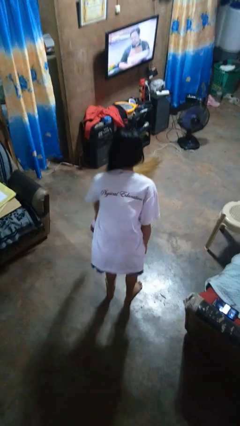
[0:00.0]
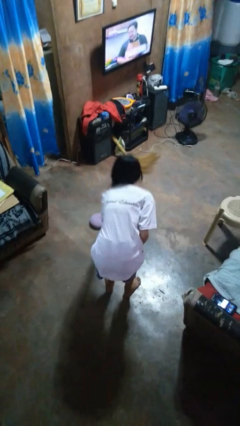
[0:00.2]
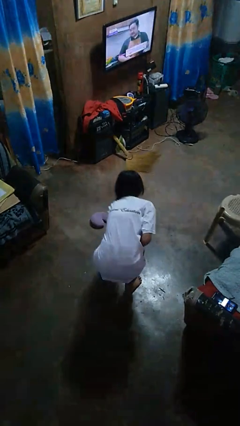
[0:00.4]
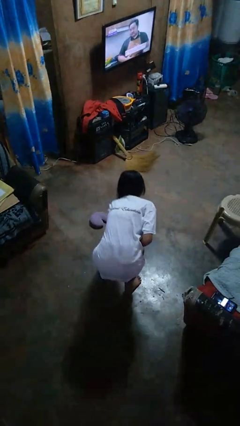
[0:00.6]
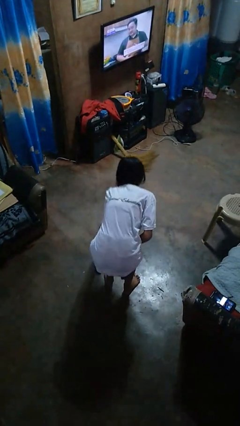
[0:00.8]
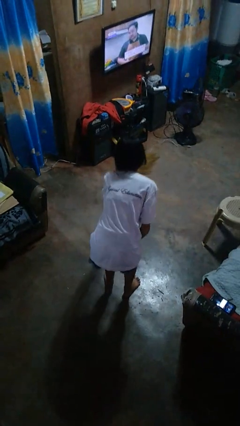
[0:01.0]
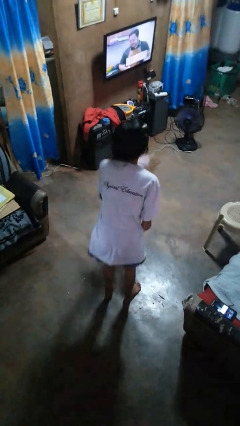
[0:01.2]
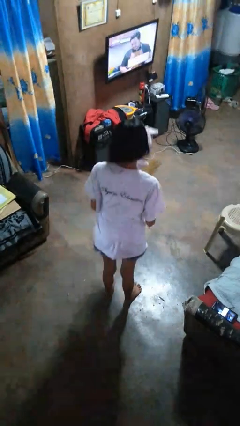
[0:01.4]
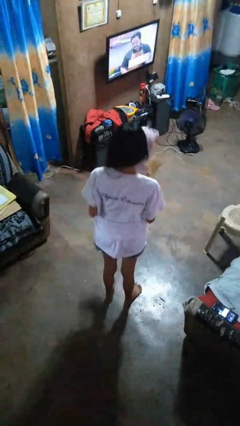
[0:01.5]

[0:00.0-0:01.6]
person picks up object from floor

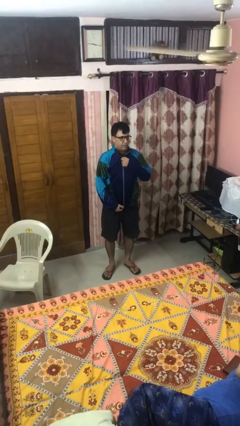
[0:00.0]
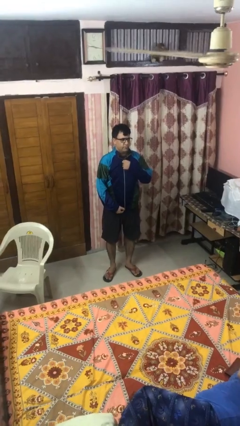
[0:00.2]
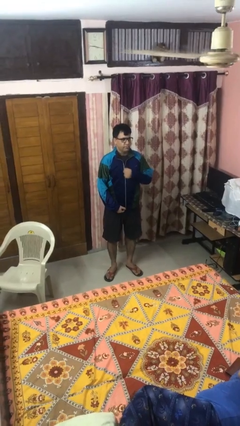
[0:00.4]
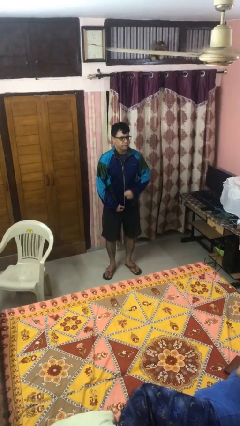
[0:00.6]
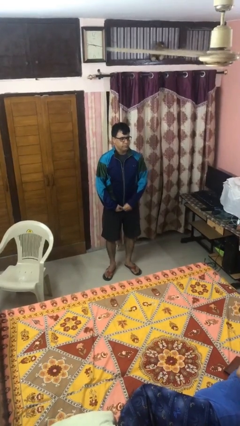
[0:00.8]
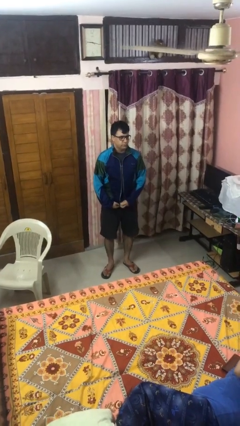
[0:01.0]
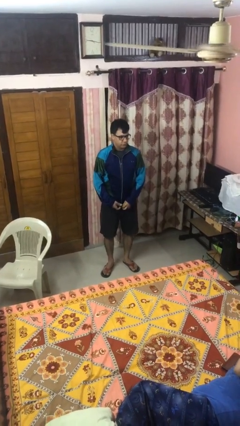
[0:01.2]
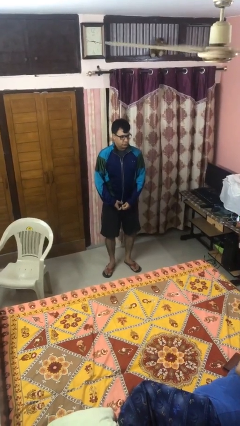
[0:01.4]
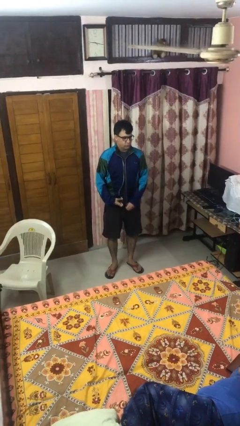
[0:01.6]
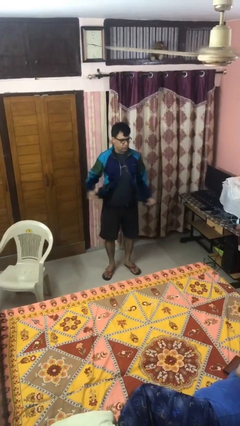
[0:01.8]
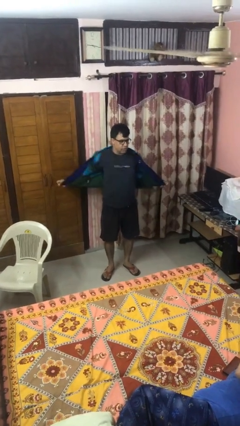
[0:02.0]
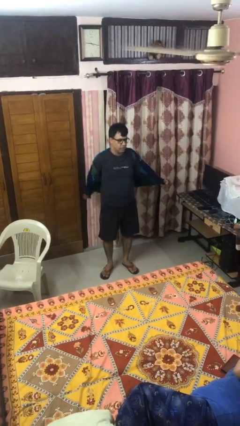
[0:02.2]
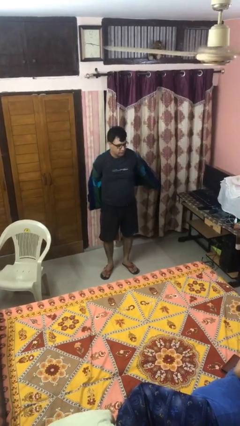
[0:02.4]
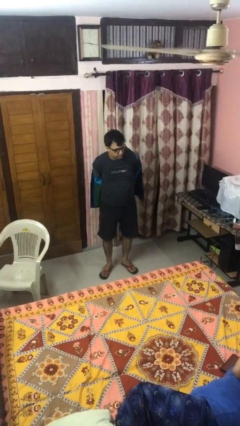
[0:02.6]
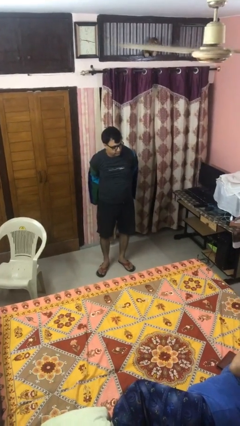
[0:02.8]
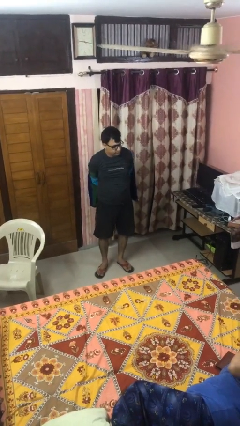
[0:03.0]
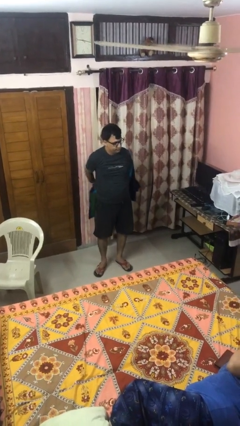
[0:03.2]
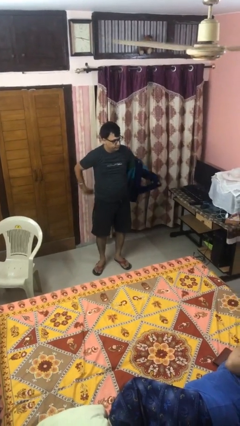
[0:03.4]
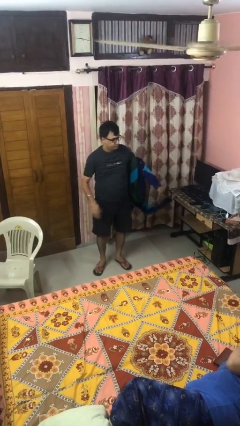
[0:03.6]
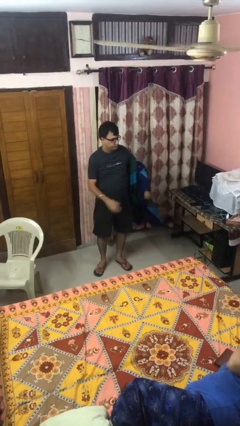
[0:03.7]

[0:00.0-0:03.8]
person unzips jacket

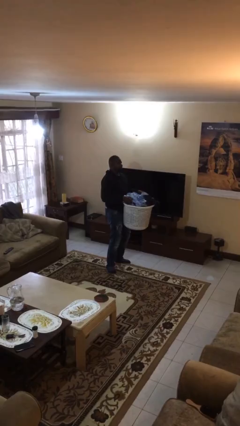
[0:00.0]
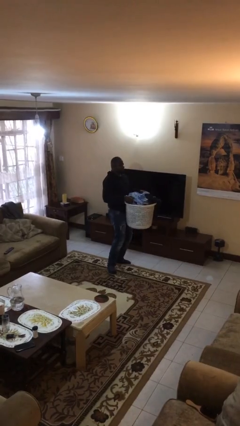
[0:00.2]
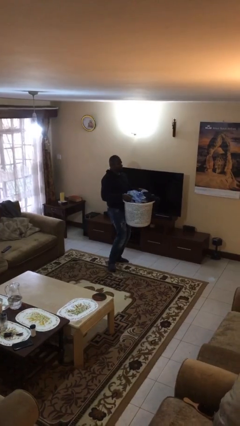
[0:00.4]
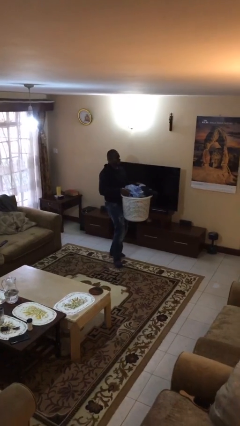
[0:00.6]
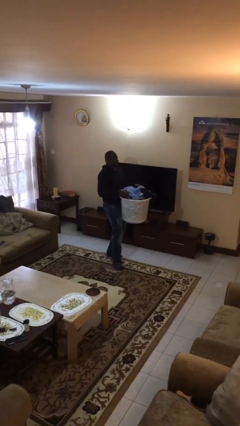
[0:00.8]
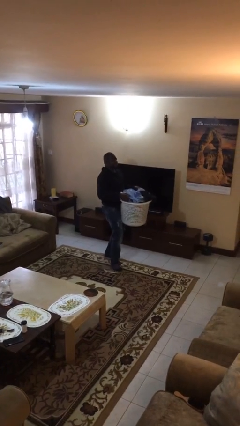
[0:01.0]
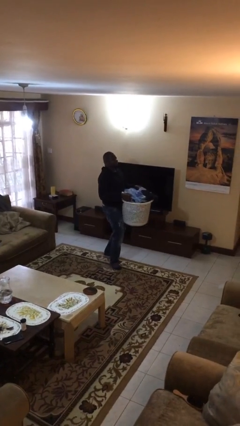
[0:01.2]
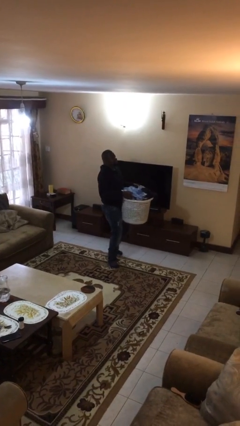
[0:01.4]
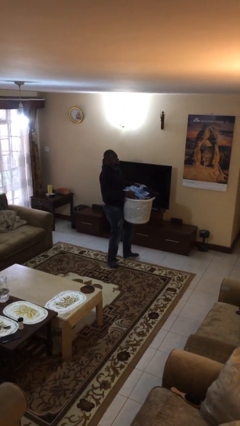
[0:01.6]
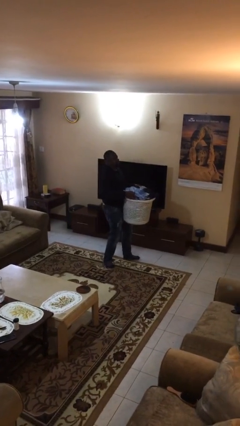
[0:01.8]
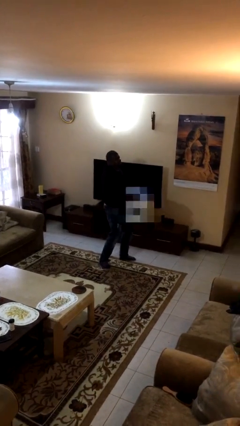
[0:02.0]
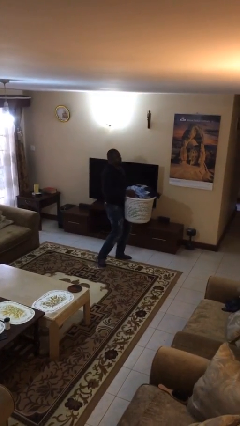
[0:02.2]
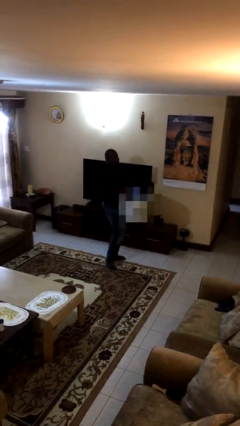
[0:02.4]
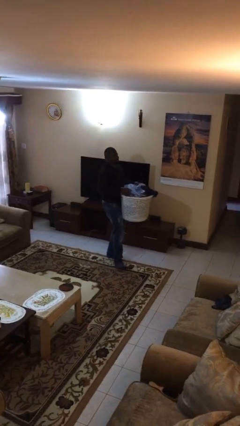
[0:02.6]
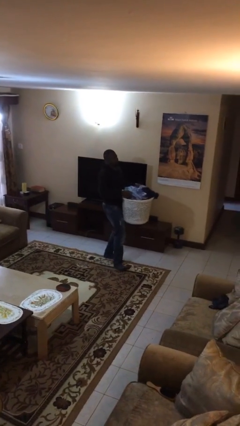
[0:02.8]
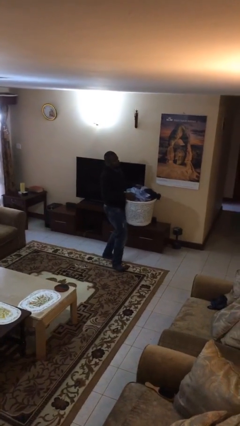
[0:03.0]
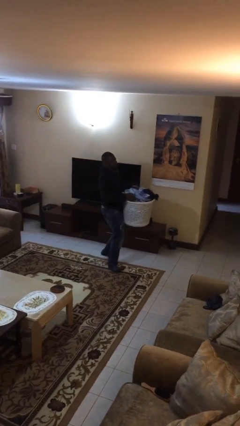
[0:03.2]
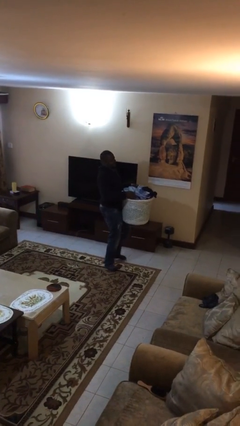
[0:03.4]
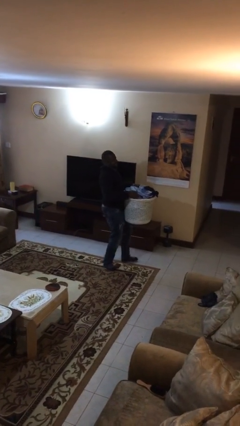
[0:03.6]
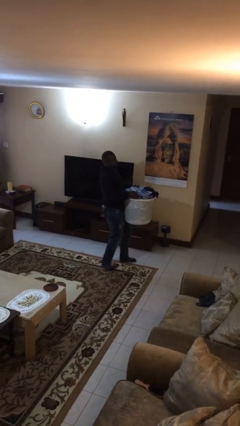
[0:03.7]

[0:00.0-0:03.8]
person carries heavy object

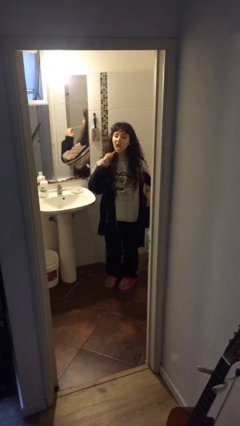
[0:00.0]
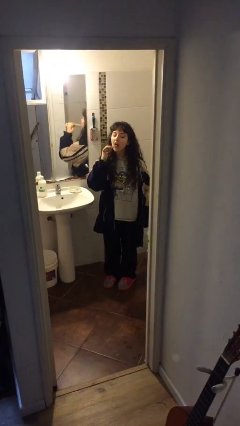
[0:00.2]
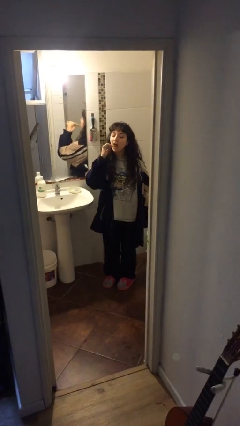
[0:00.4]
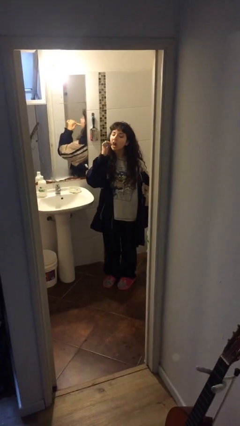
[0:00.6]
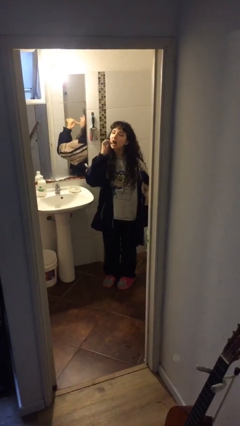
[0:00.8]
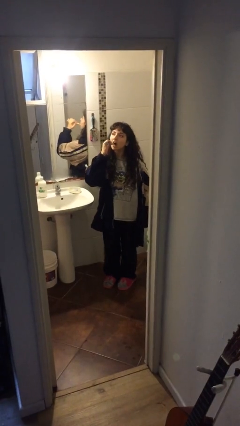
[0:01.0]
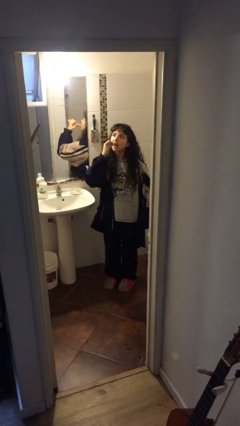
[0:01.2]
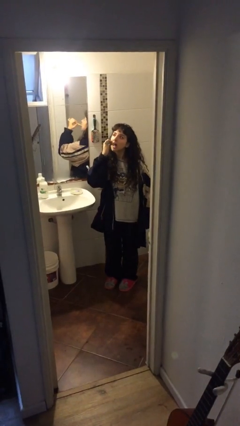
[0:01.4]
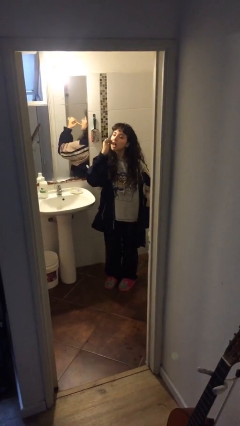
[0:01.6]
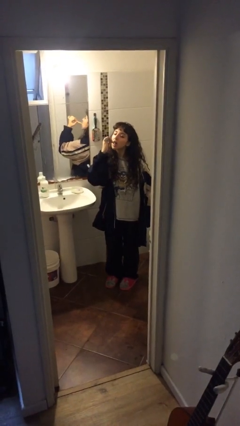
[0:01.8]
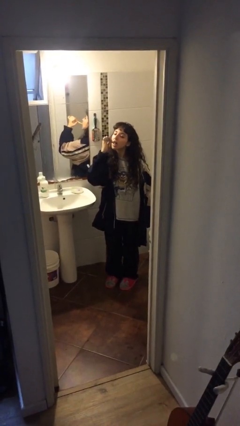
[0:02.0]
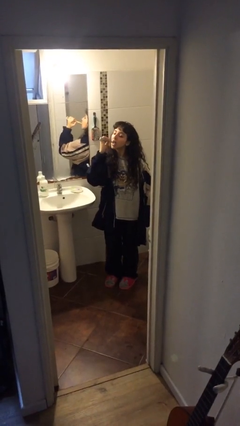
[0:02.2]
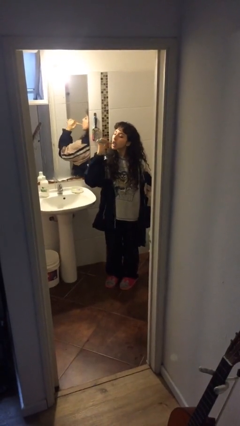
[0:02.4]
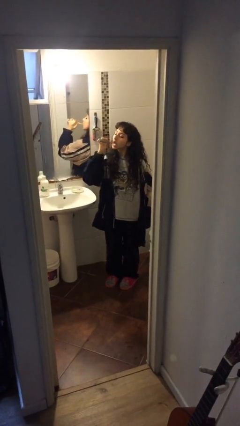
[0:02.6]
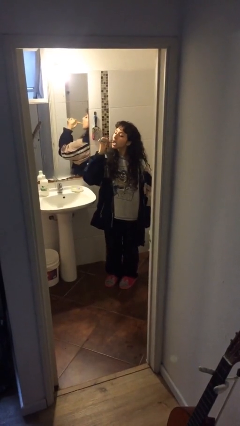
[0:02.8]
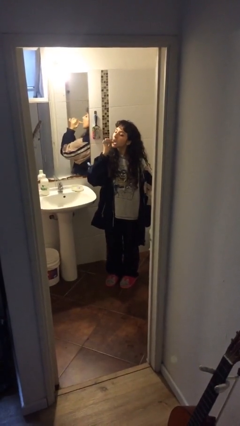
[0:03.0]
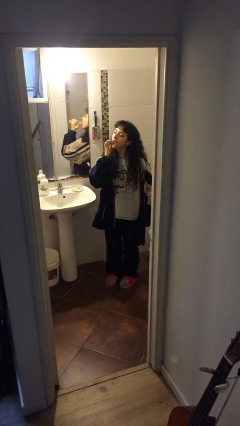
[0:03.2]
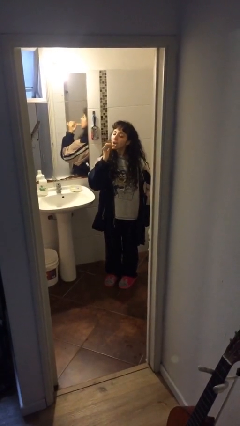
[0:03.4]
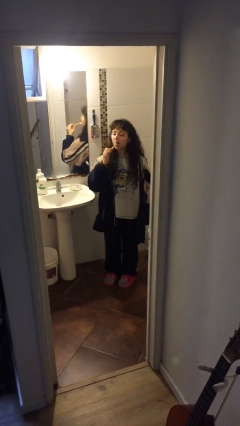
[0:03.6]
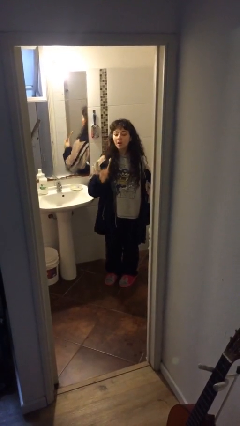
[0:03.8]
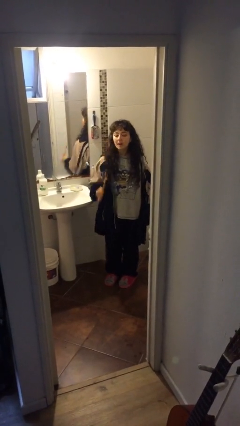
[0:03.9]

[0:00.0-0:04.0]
person brushes teeth

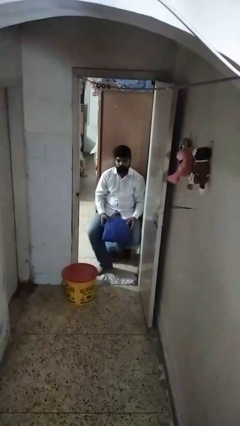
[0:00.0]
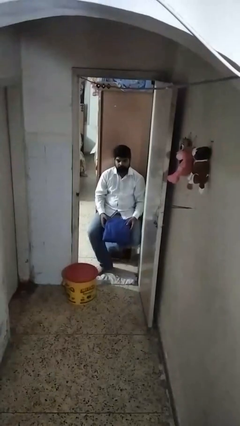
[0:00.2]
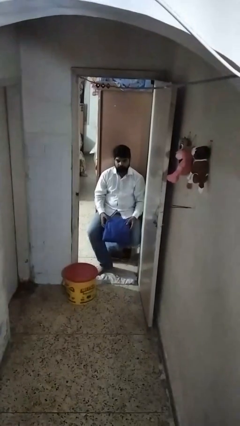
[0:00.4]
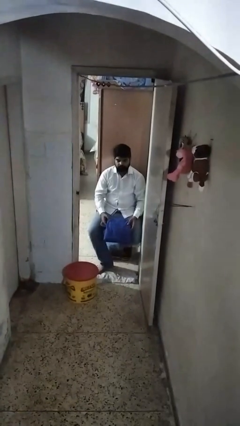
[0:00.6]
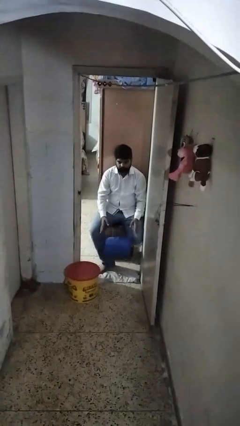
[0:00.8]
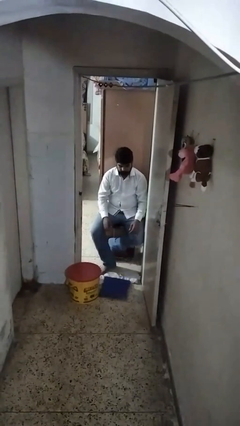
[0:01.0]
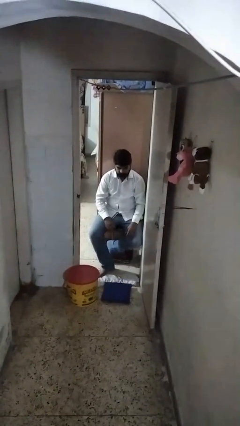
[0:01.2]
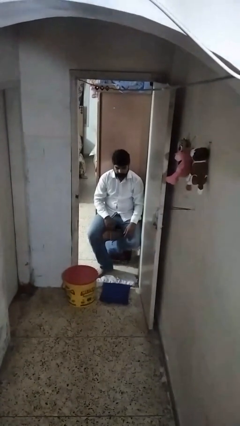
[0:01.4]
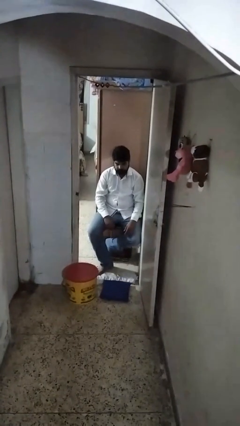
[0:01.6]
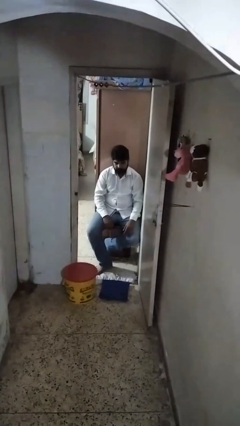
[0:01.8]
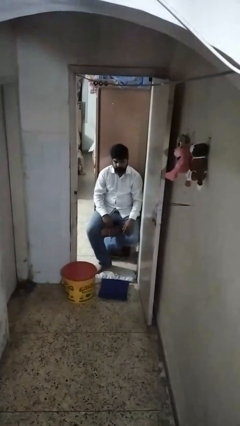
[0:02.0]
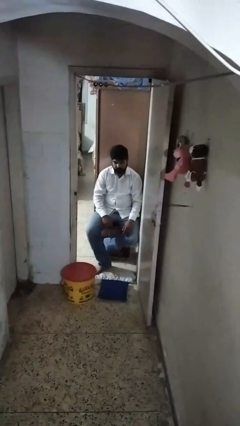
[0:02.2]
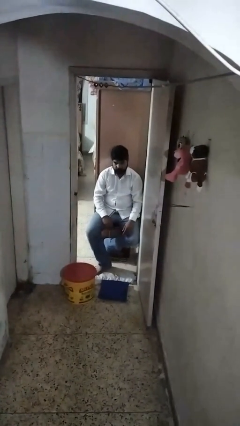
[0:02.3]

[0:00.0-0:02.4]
person drops object

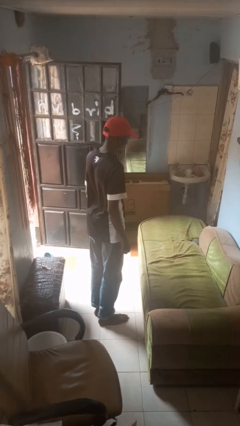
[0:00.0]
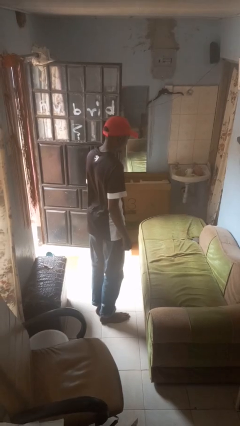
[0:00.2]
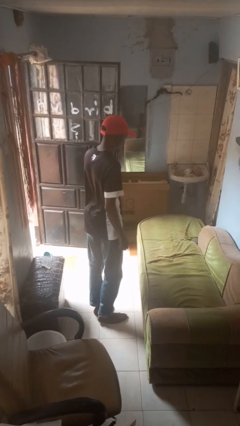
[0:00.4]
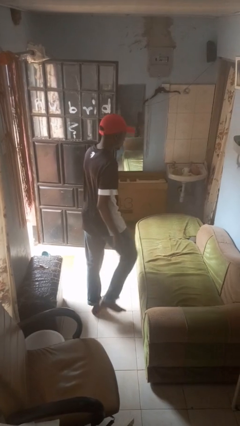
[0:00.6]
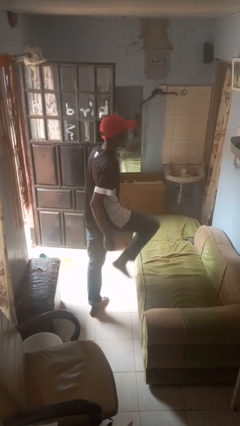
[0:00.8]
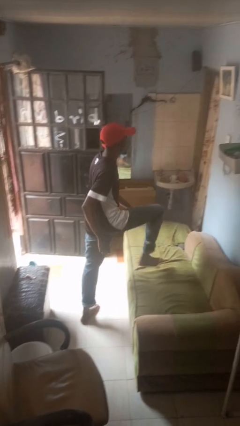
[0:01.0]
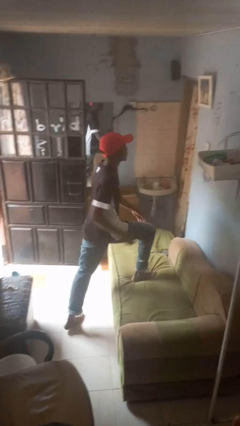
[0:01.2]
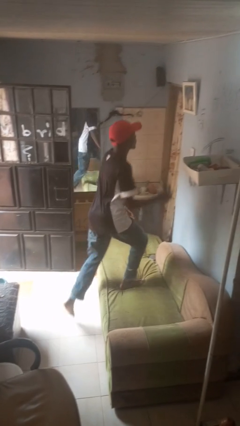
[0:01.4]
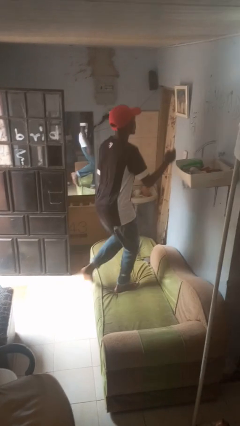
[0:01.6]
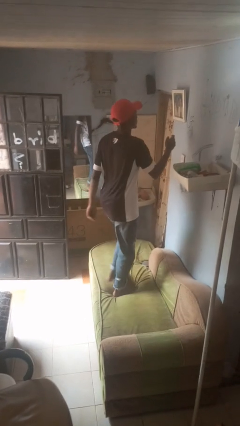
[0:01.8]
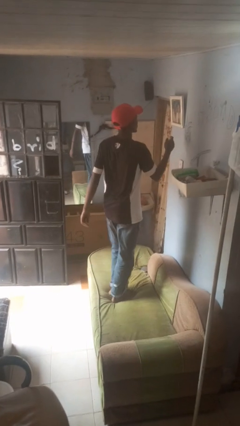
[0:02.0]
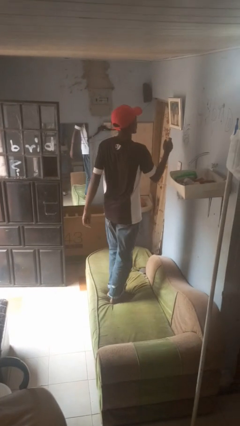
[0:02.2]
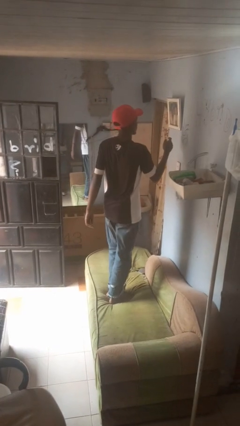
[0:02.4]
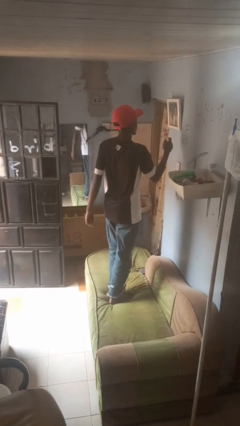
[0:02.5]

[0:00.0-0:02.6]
person climbs on couch
